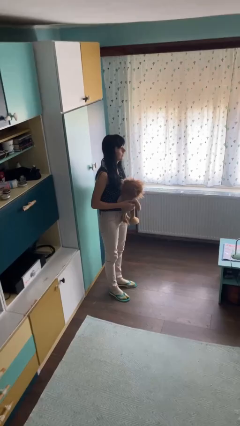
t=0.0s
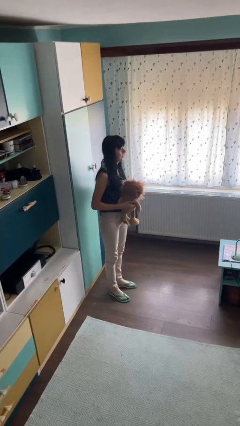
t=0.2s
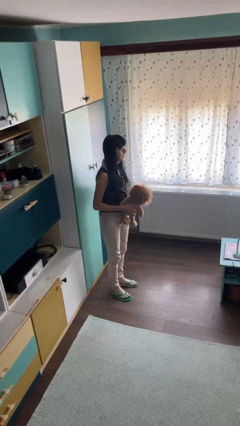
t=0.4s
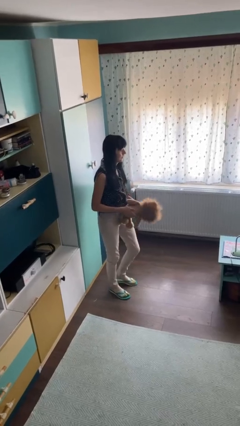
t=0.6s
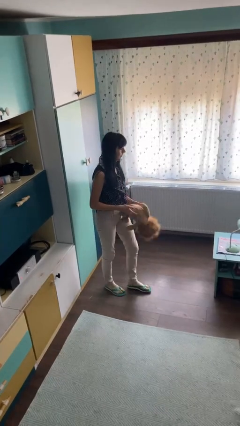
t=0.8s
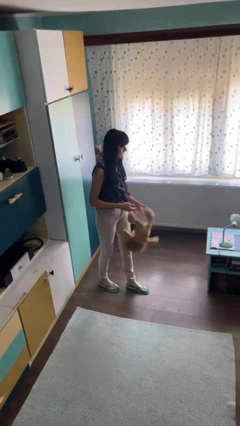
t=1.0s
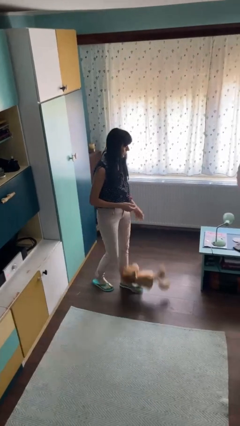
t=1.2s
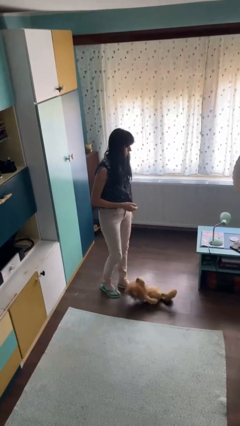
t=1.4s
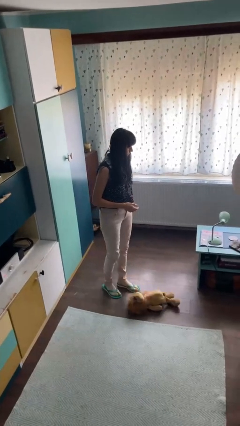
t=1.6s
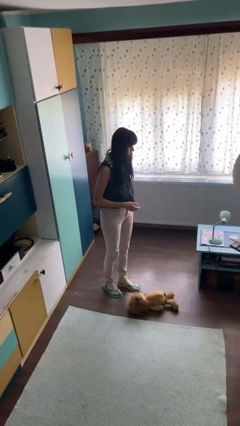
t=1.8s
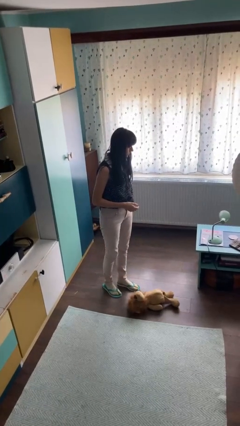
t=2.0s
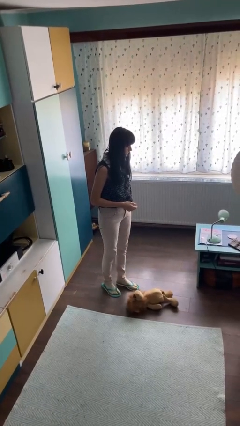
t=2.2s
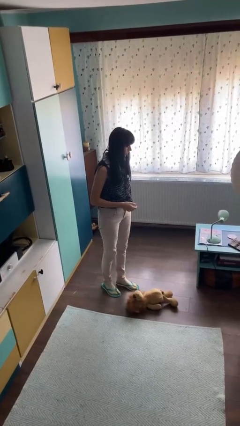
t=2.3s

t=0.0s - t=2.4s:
person drops object

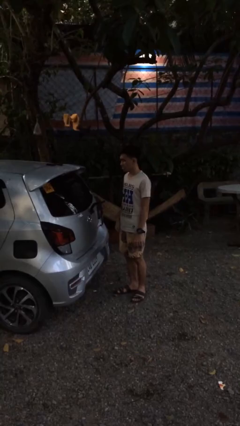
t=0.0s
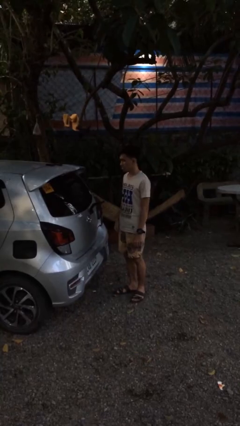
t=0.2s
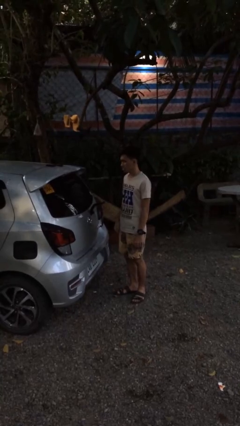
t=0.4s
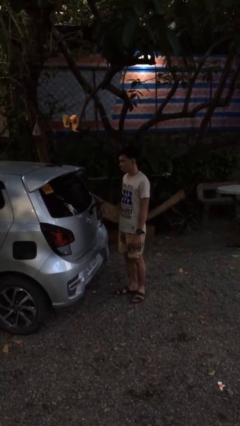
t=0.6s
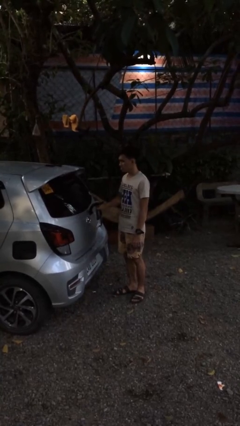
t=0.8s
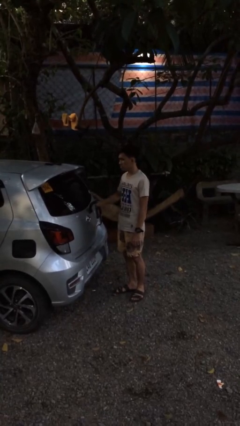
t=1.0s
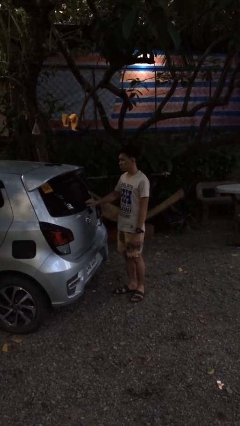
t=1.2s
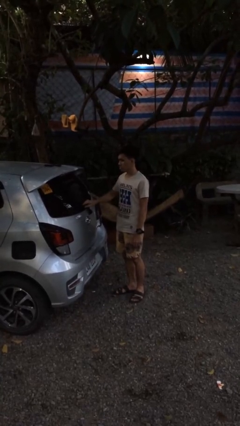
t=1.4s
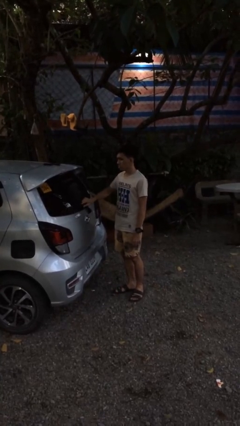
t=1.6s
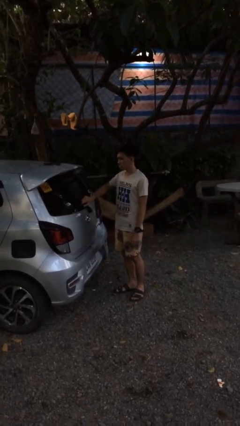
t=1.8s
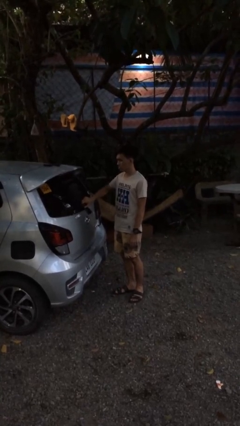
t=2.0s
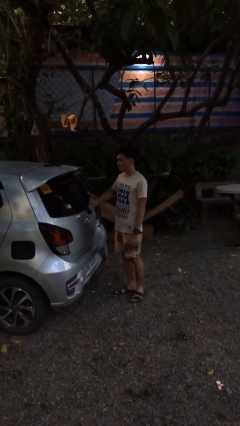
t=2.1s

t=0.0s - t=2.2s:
person flips down car wipers

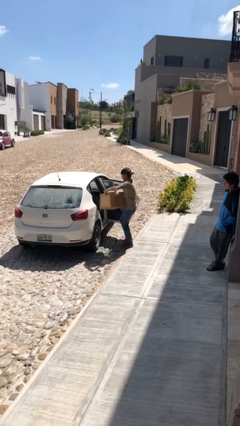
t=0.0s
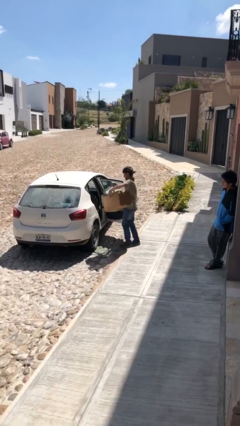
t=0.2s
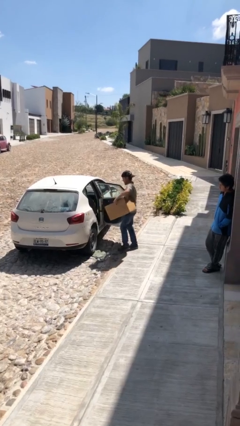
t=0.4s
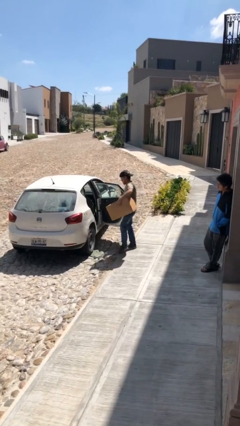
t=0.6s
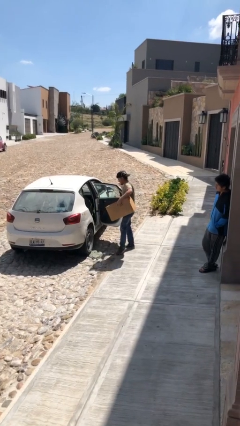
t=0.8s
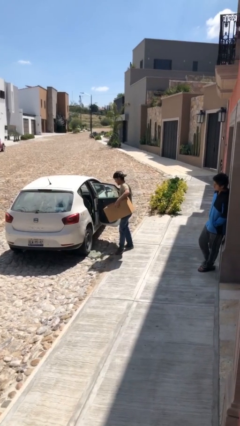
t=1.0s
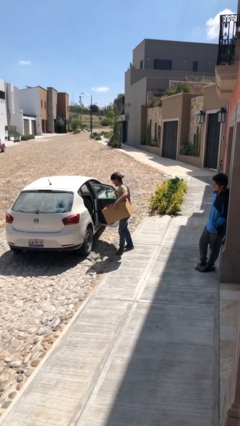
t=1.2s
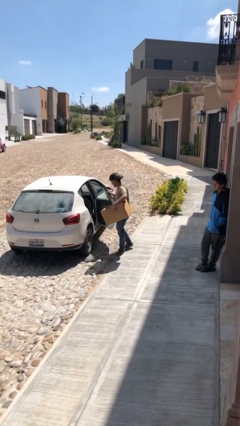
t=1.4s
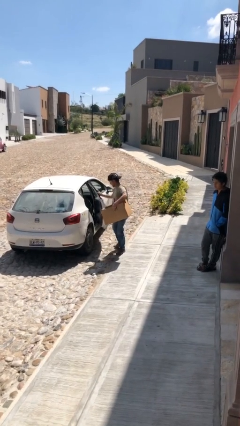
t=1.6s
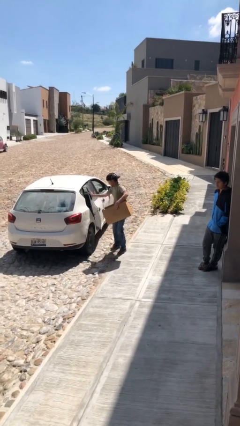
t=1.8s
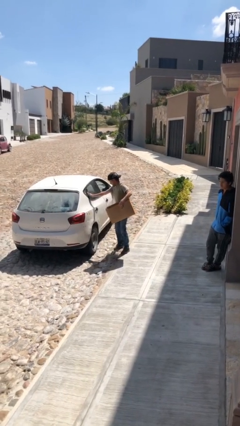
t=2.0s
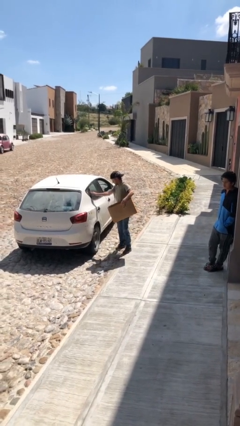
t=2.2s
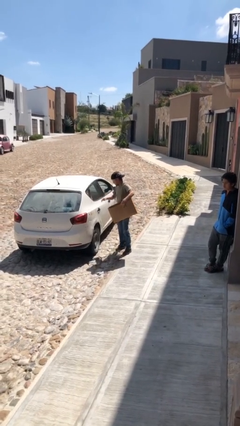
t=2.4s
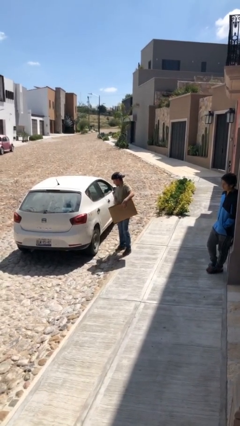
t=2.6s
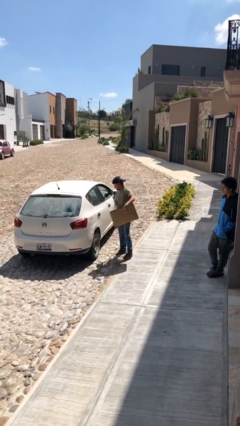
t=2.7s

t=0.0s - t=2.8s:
person closes car door

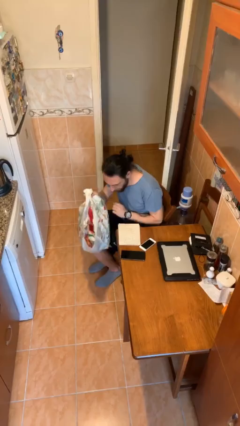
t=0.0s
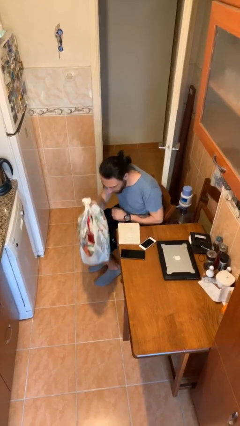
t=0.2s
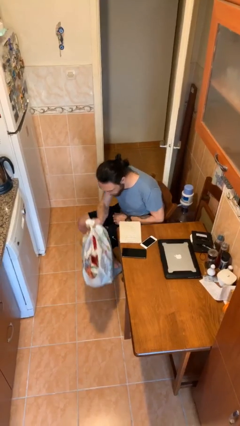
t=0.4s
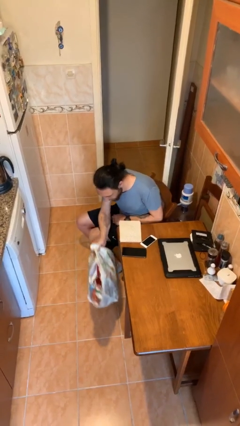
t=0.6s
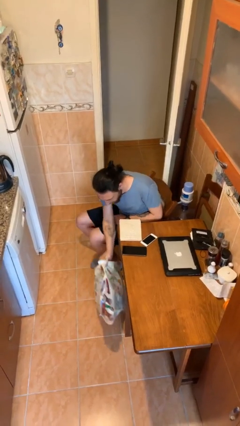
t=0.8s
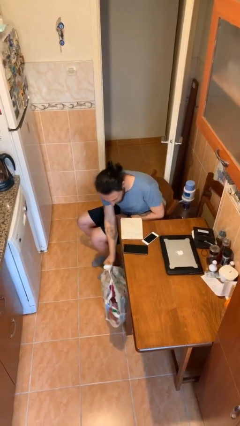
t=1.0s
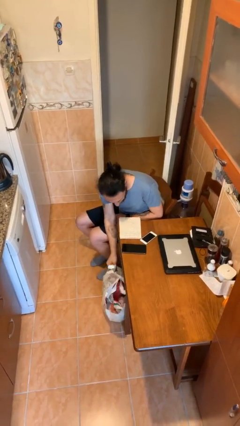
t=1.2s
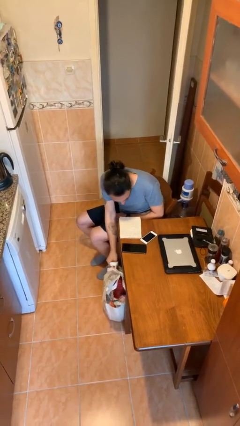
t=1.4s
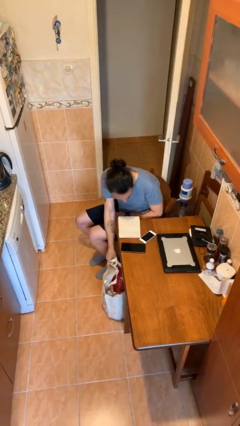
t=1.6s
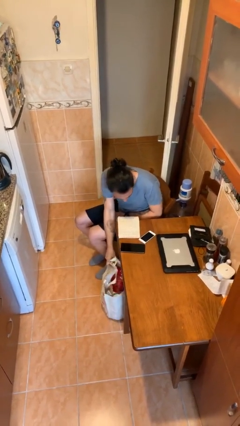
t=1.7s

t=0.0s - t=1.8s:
person puts down object on floor

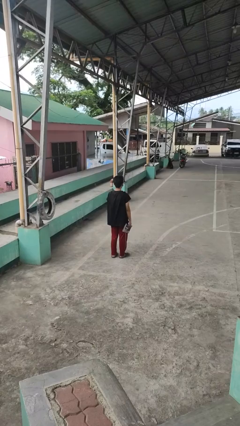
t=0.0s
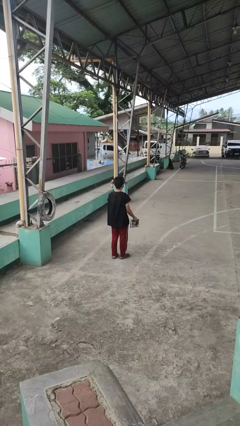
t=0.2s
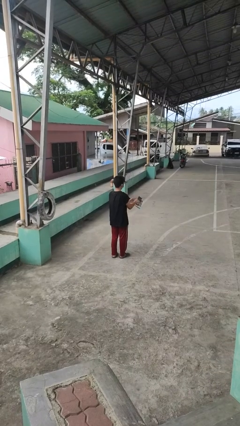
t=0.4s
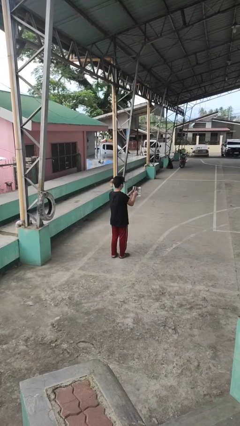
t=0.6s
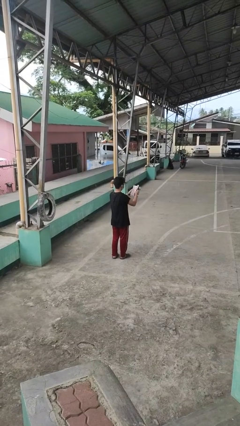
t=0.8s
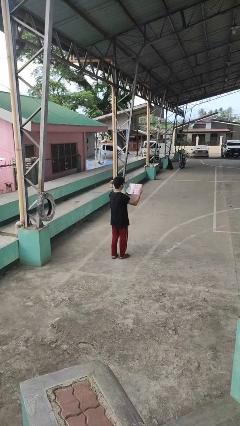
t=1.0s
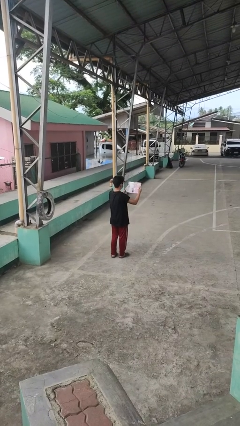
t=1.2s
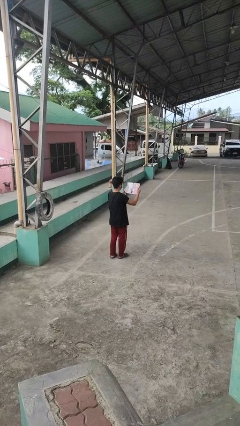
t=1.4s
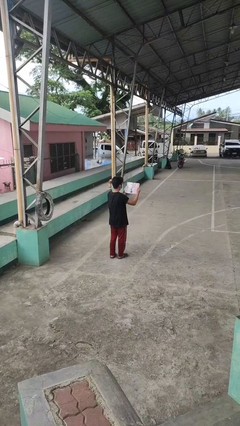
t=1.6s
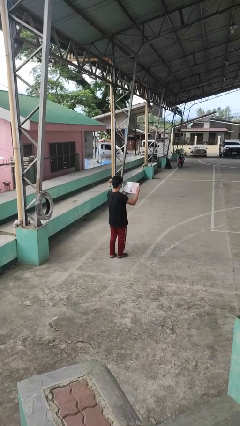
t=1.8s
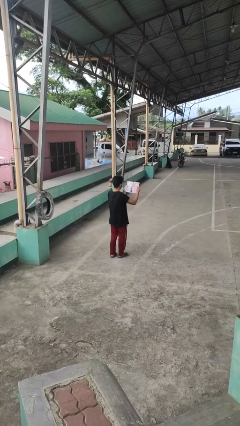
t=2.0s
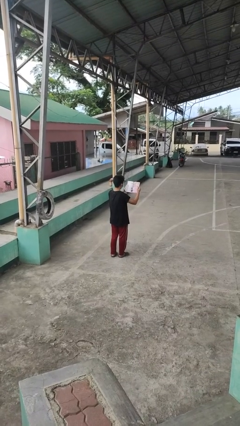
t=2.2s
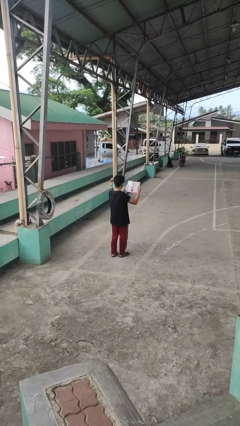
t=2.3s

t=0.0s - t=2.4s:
person reads magazine

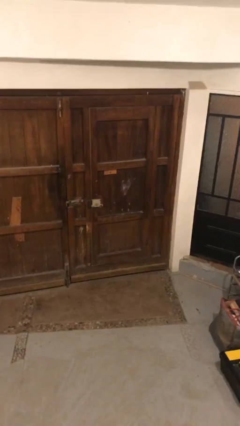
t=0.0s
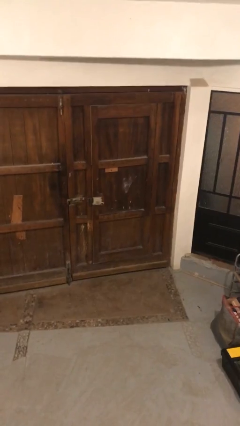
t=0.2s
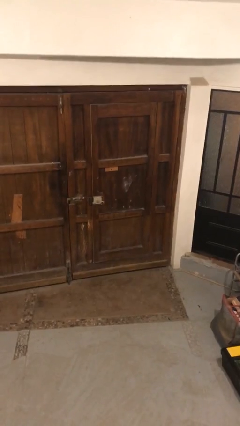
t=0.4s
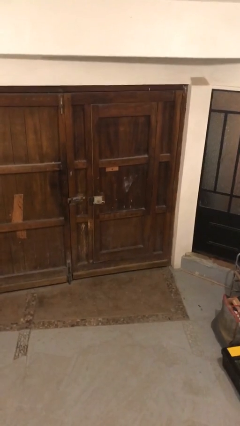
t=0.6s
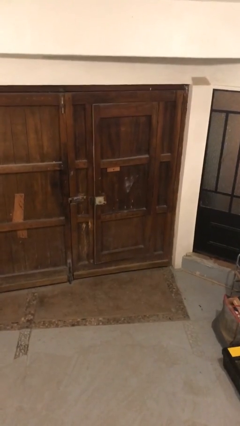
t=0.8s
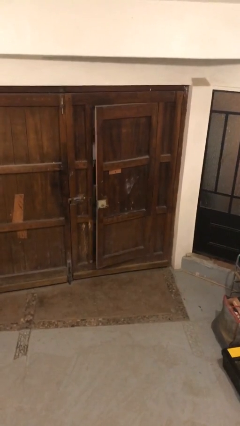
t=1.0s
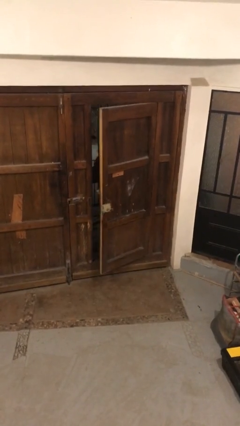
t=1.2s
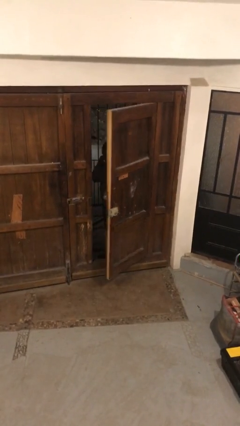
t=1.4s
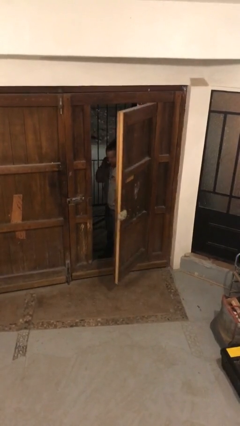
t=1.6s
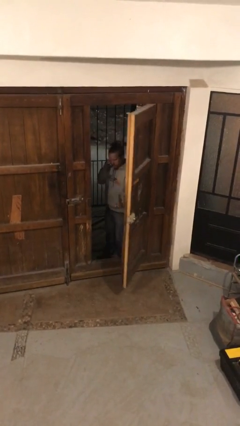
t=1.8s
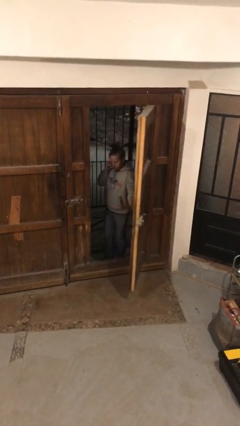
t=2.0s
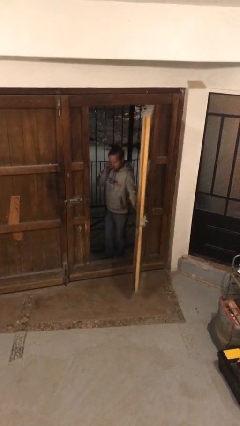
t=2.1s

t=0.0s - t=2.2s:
person opens facility door

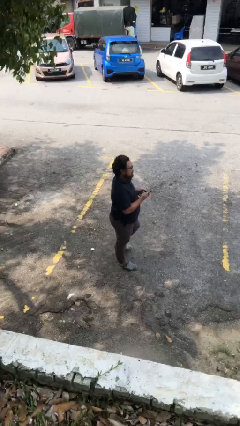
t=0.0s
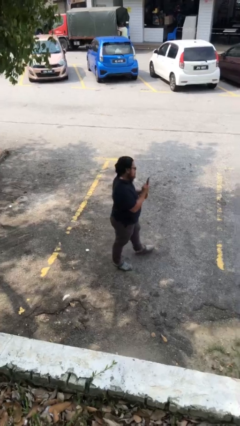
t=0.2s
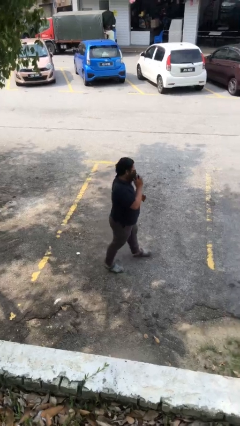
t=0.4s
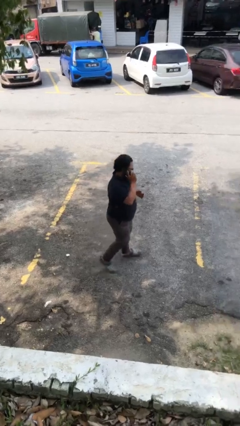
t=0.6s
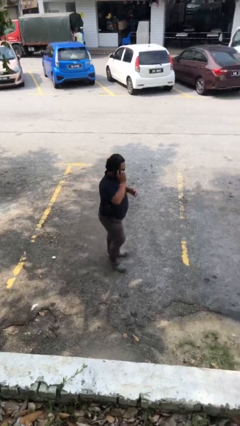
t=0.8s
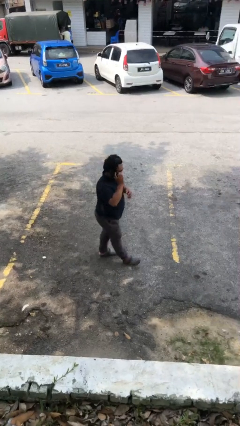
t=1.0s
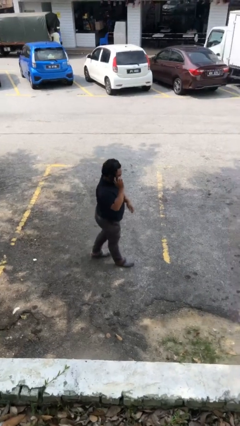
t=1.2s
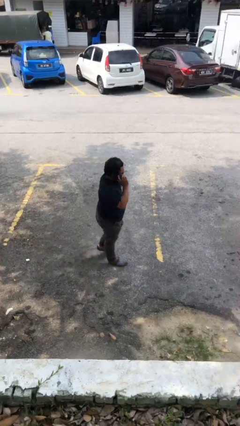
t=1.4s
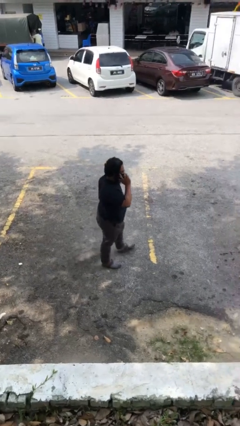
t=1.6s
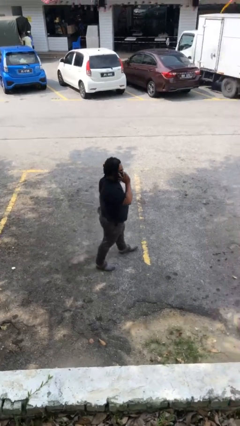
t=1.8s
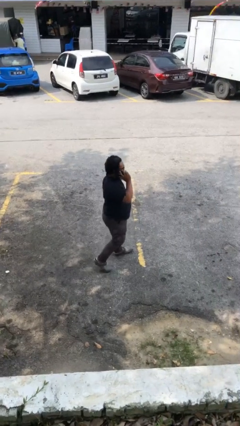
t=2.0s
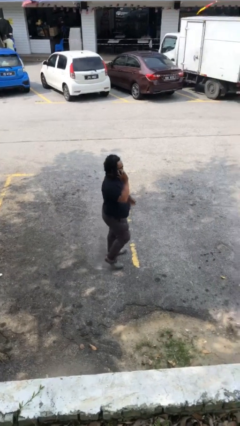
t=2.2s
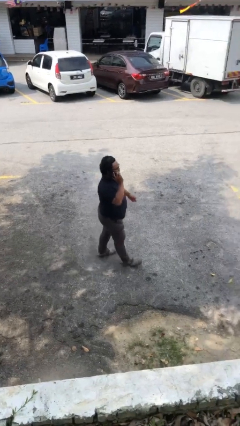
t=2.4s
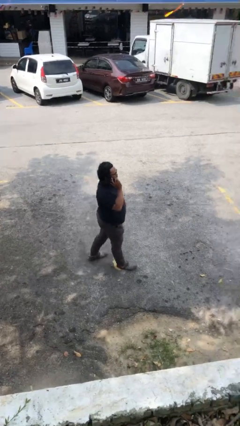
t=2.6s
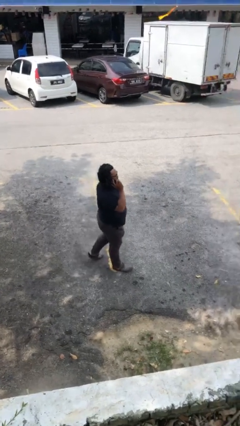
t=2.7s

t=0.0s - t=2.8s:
person talks on phone

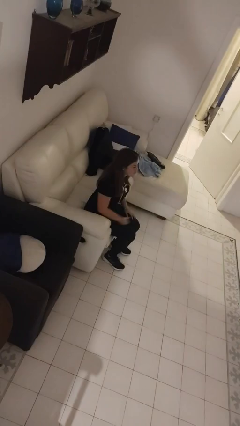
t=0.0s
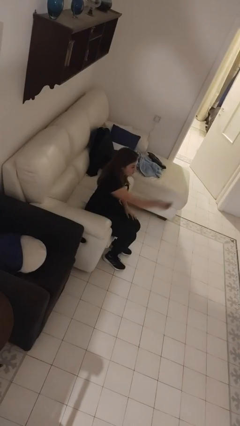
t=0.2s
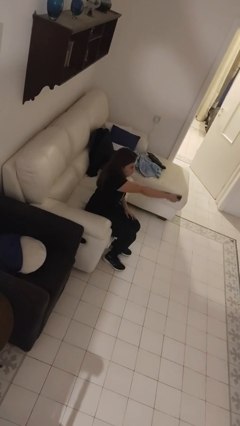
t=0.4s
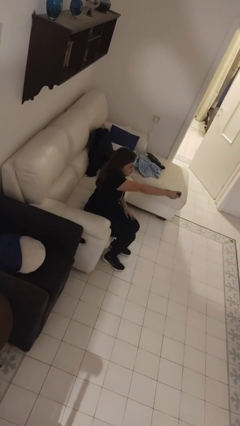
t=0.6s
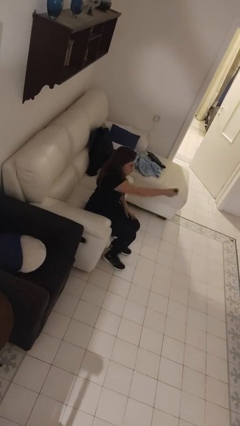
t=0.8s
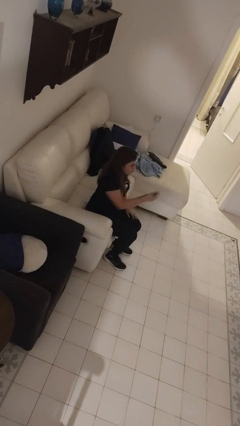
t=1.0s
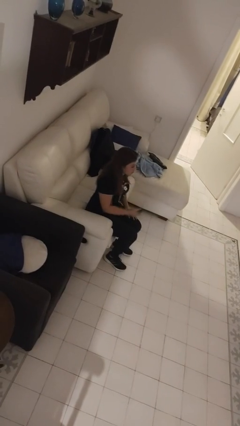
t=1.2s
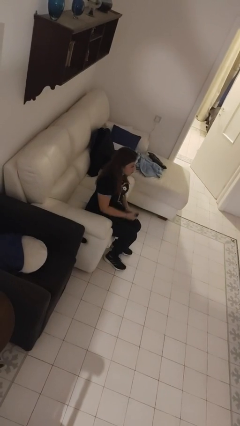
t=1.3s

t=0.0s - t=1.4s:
person uses television remote
